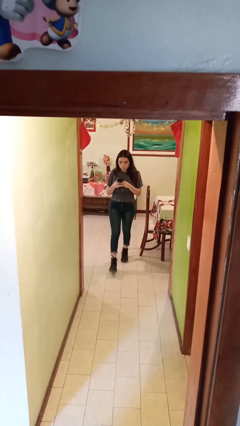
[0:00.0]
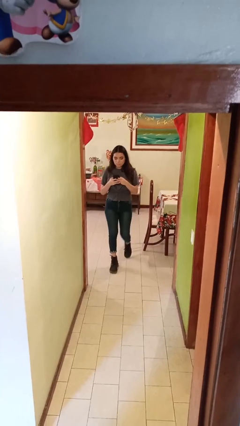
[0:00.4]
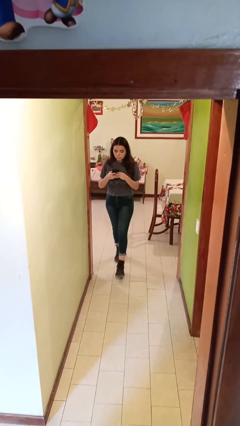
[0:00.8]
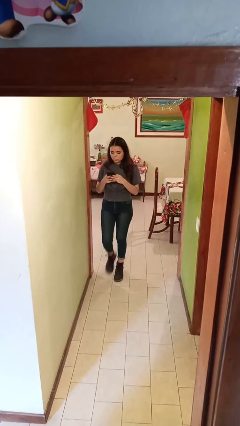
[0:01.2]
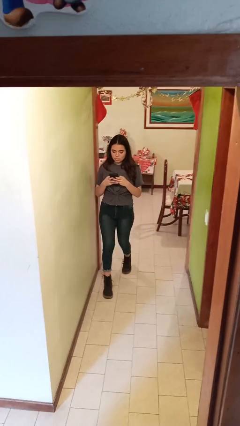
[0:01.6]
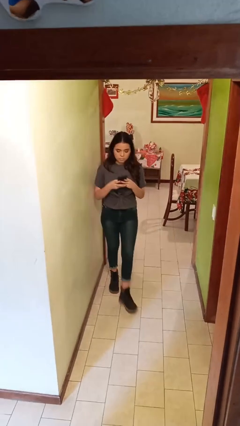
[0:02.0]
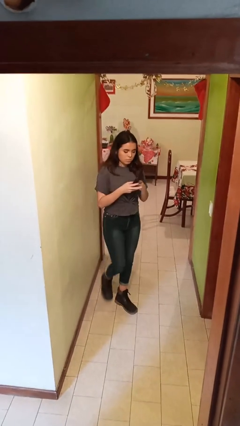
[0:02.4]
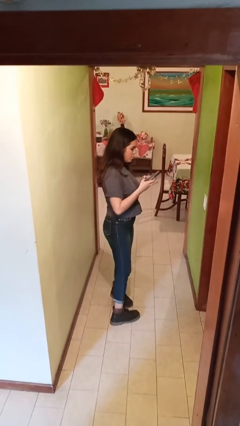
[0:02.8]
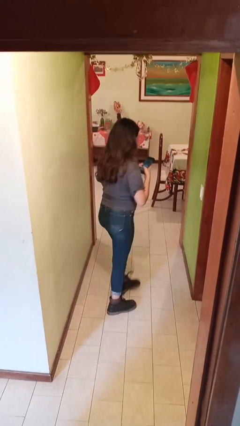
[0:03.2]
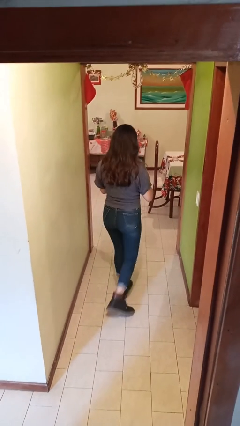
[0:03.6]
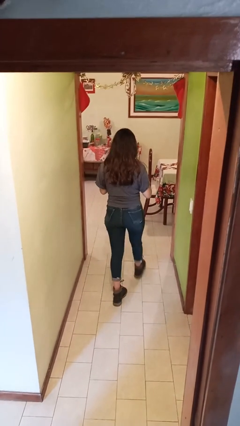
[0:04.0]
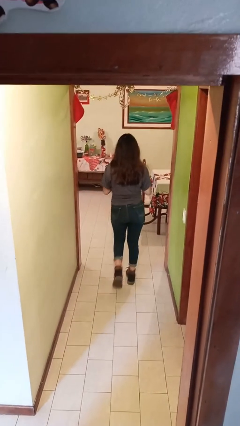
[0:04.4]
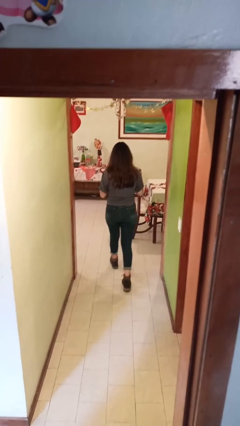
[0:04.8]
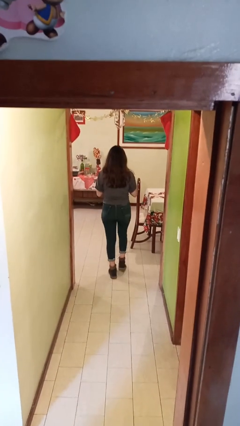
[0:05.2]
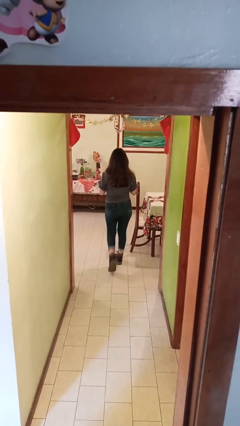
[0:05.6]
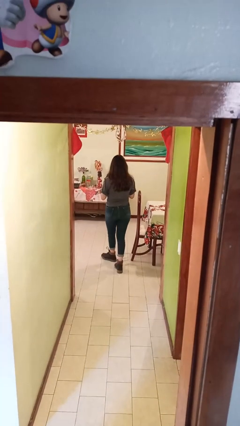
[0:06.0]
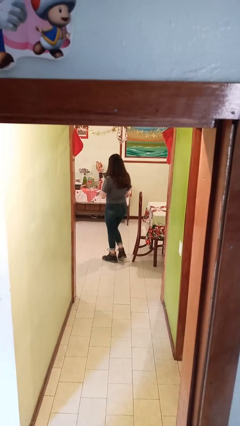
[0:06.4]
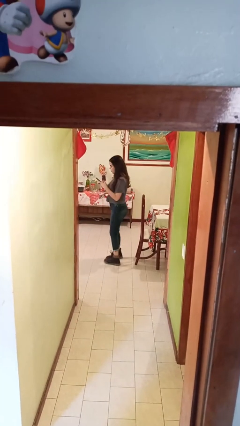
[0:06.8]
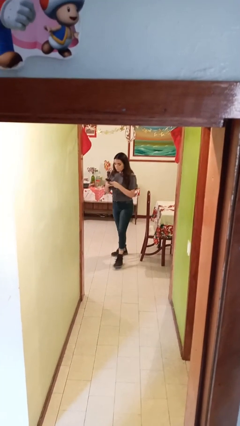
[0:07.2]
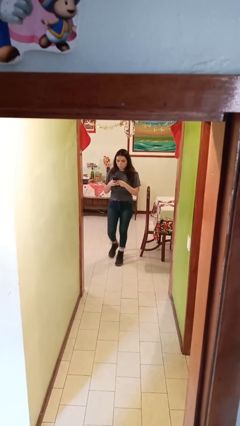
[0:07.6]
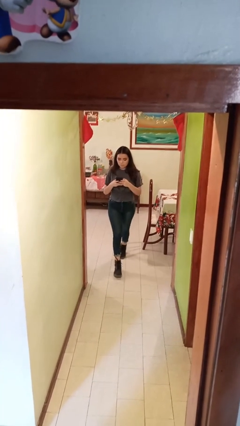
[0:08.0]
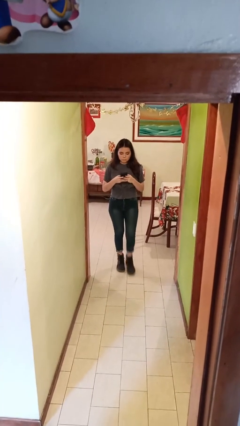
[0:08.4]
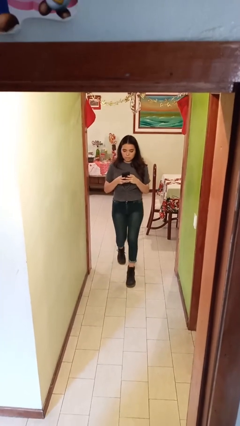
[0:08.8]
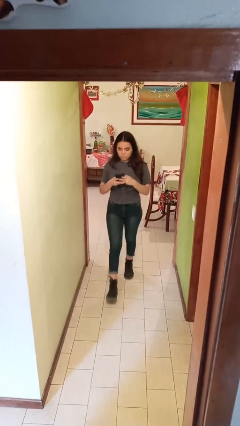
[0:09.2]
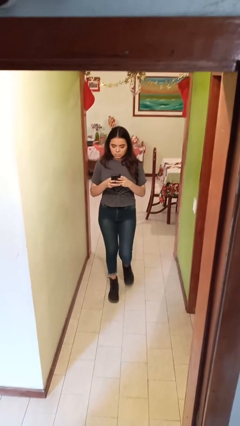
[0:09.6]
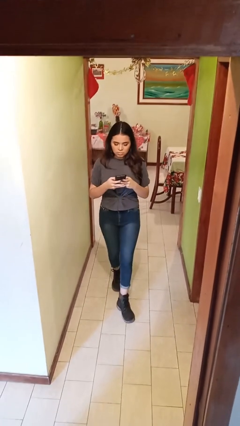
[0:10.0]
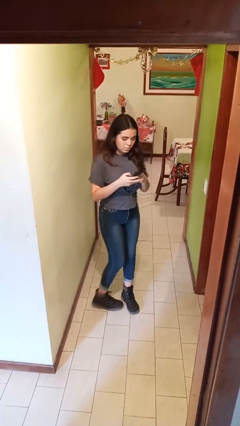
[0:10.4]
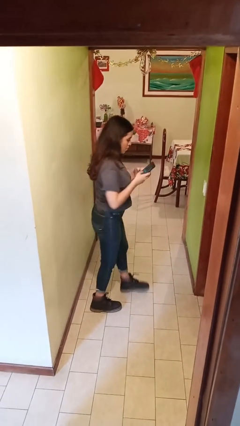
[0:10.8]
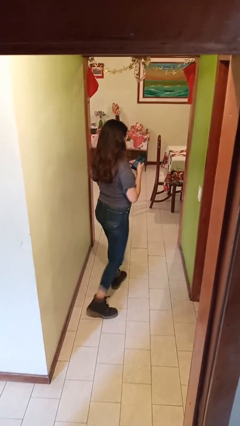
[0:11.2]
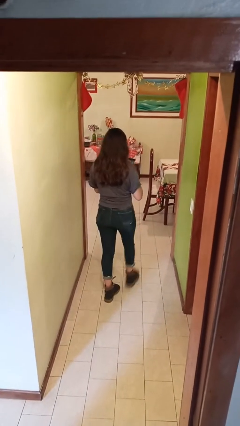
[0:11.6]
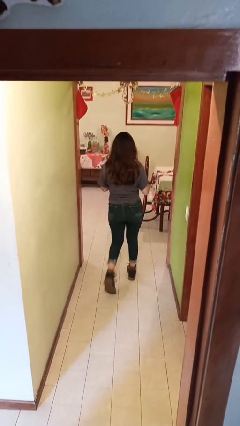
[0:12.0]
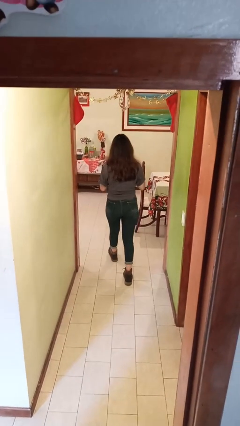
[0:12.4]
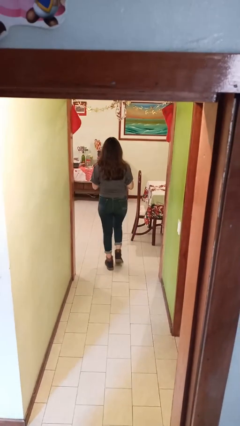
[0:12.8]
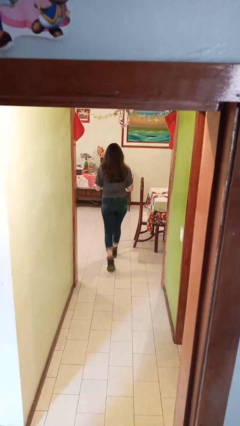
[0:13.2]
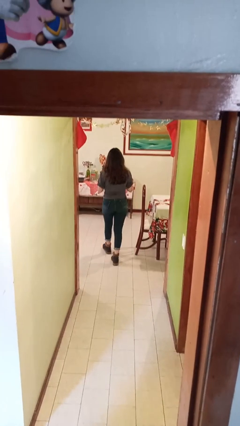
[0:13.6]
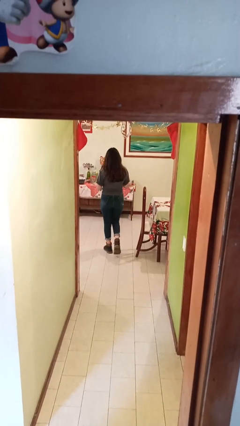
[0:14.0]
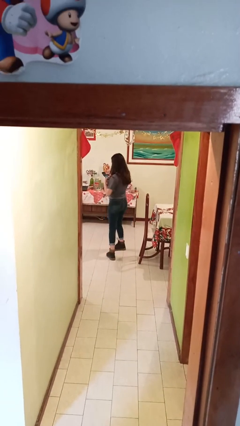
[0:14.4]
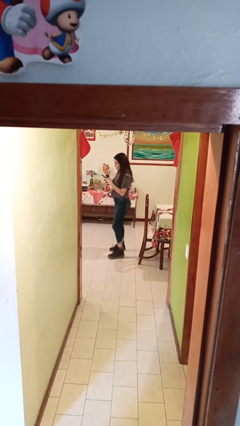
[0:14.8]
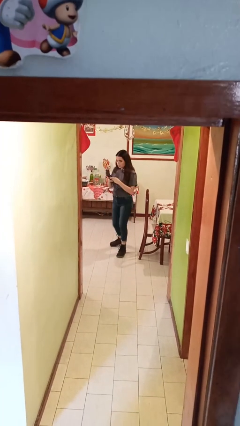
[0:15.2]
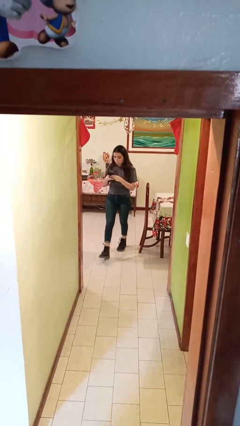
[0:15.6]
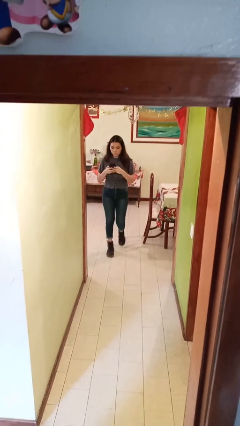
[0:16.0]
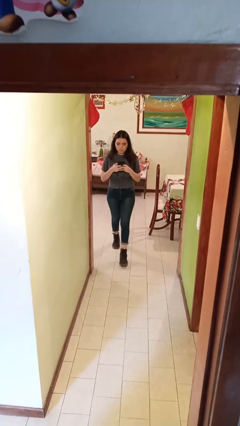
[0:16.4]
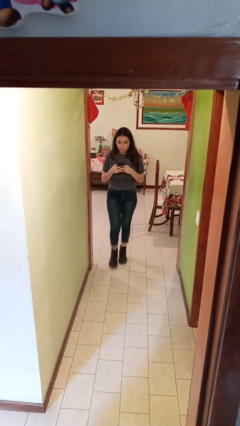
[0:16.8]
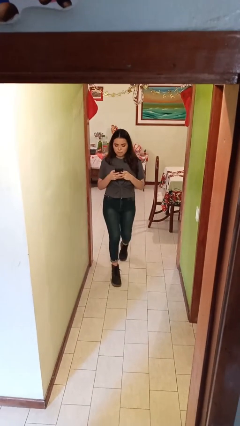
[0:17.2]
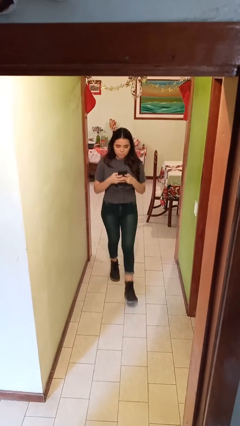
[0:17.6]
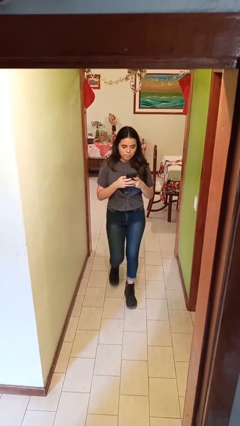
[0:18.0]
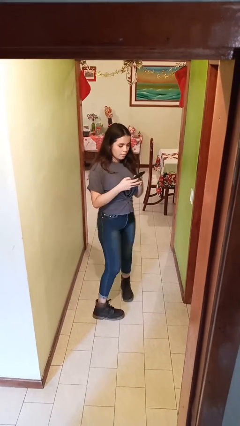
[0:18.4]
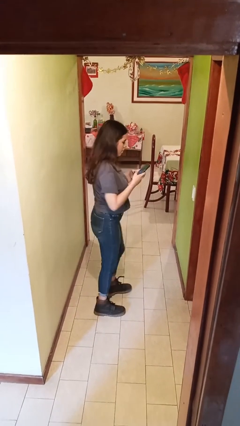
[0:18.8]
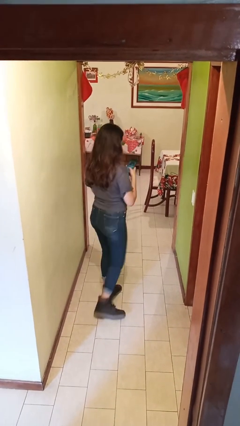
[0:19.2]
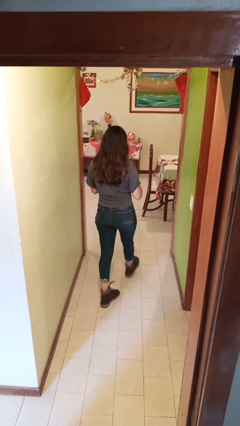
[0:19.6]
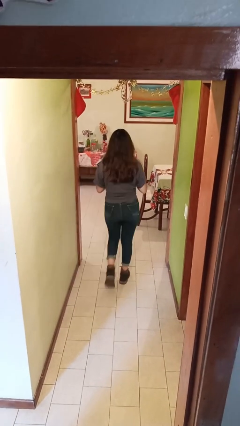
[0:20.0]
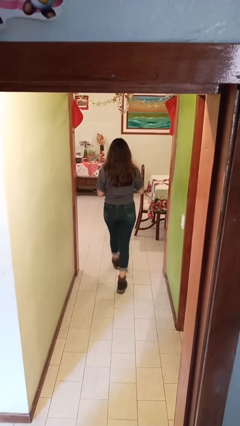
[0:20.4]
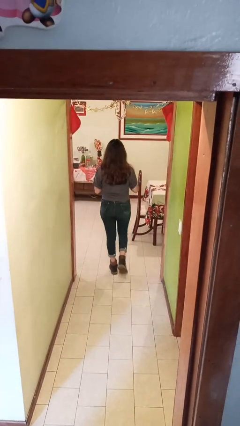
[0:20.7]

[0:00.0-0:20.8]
person texts on phone

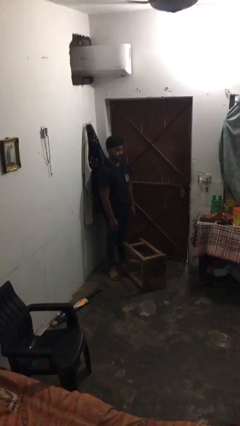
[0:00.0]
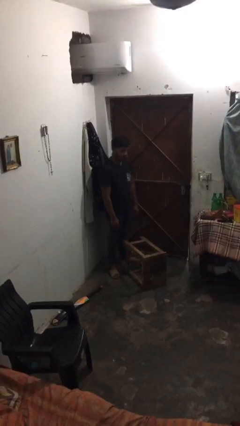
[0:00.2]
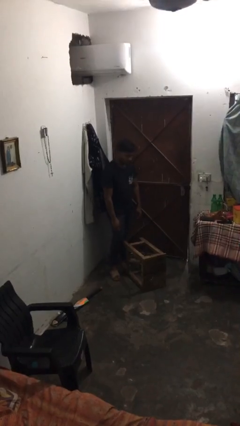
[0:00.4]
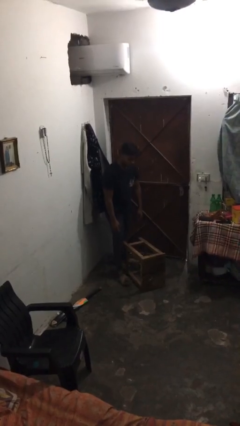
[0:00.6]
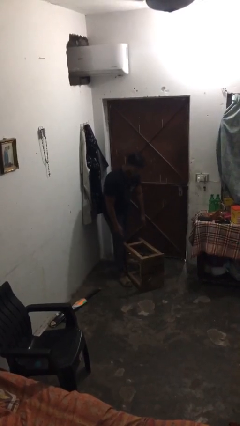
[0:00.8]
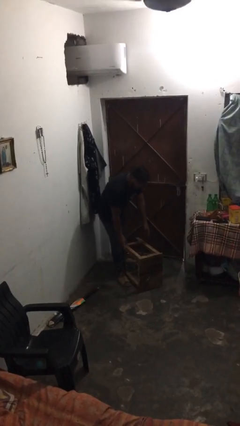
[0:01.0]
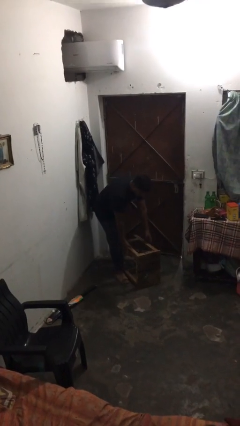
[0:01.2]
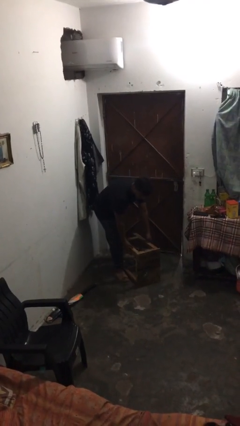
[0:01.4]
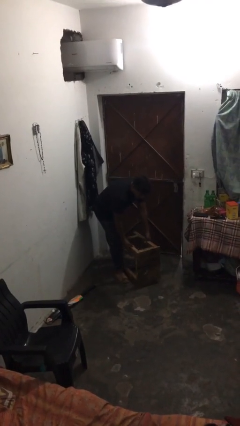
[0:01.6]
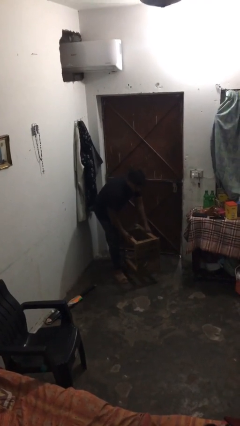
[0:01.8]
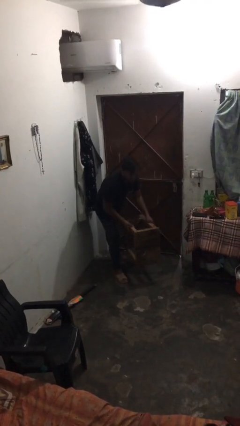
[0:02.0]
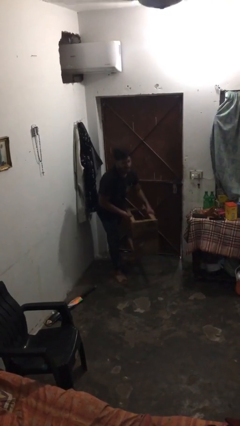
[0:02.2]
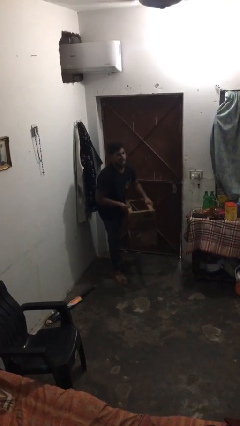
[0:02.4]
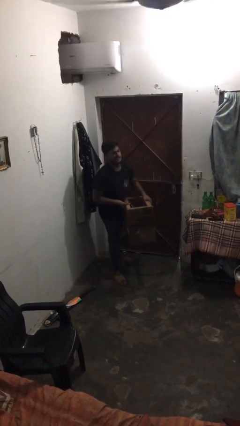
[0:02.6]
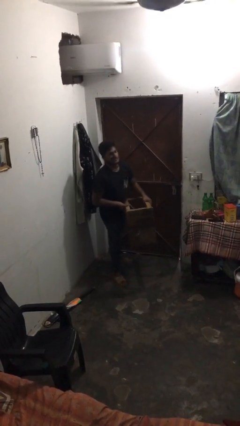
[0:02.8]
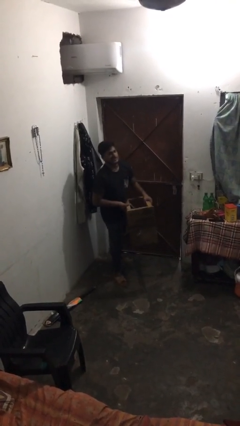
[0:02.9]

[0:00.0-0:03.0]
person picks up object from floor

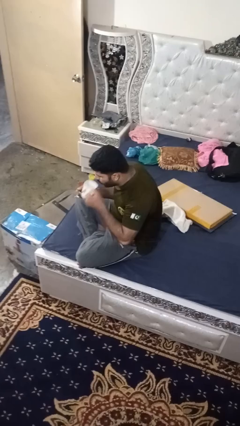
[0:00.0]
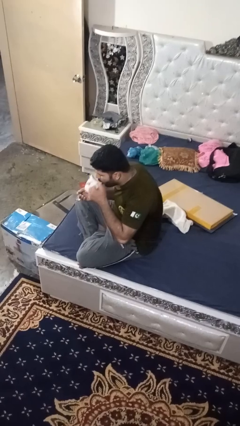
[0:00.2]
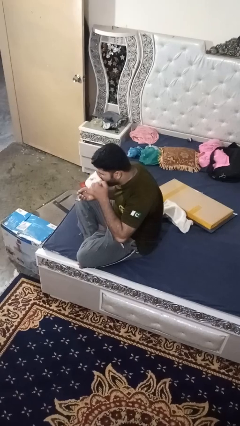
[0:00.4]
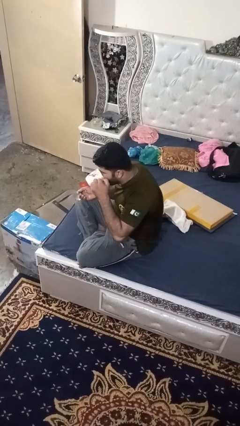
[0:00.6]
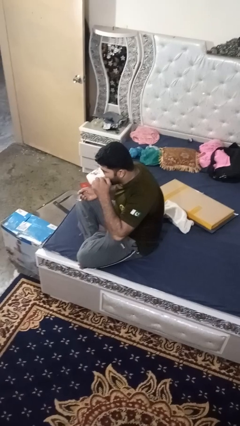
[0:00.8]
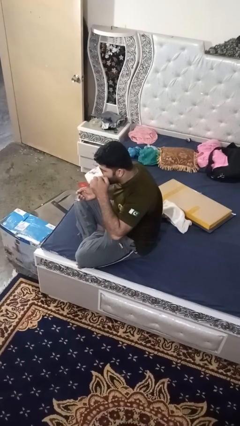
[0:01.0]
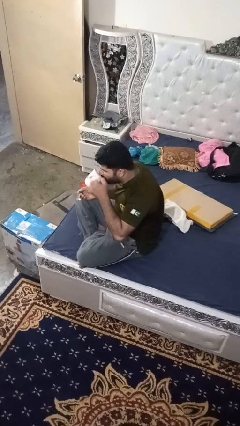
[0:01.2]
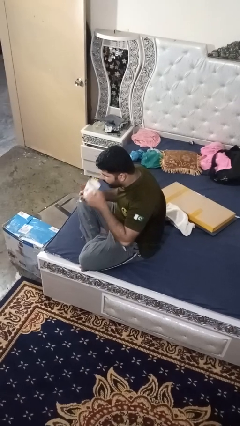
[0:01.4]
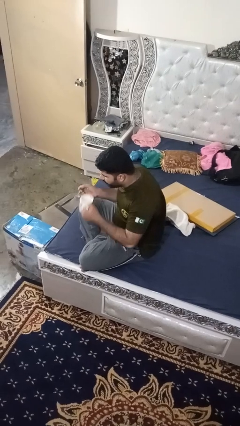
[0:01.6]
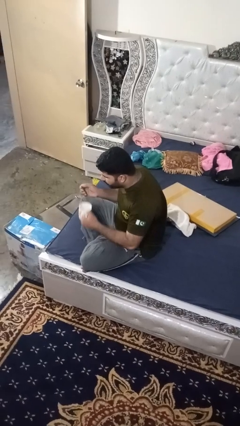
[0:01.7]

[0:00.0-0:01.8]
person drinks from mug

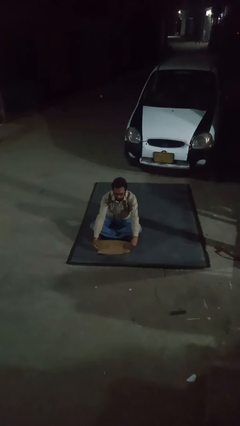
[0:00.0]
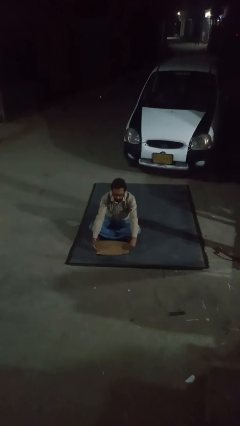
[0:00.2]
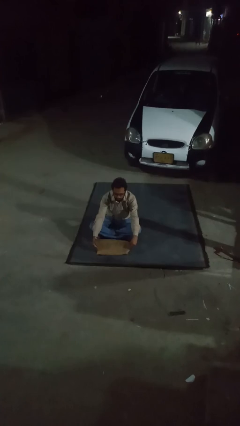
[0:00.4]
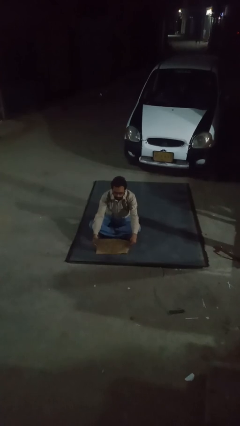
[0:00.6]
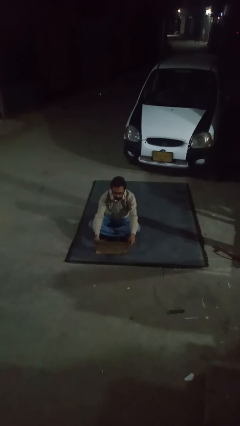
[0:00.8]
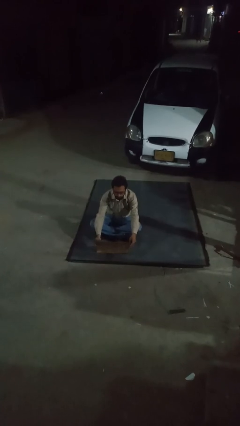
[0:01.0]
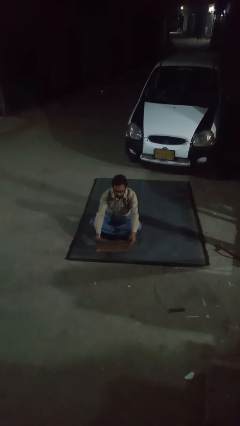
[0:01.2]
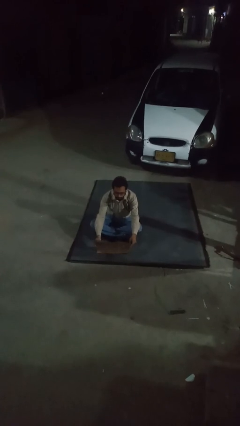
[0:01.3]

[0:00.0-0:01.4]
person opens laptop

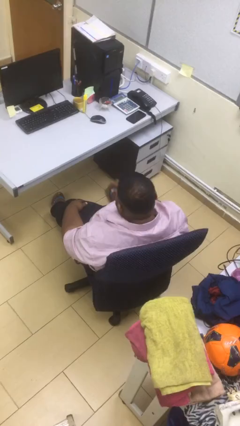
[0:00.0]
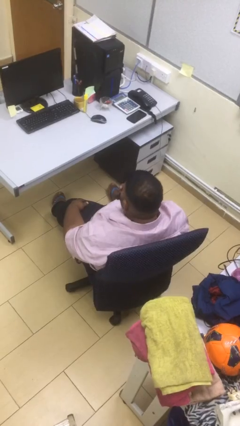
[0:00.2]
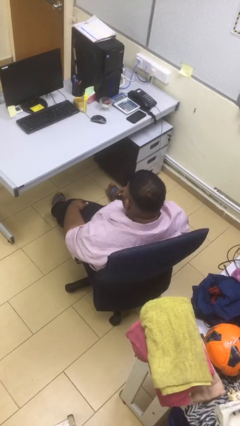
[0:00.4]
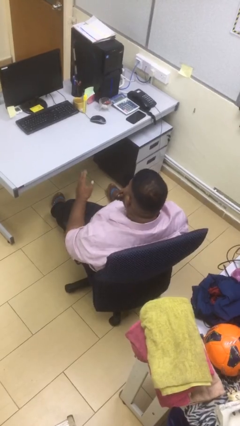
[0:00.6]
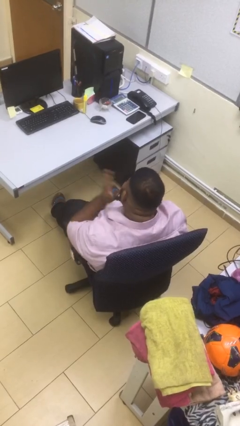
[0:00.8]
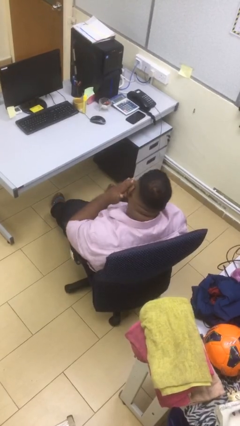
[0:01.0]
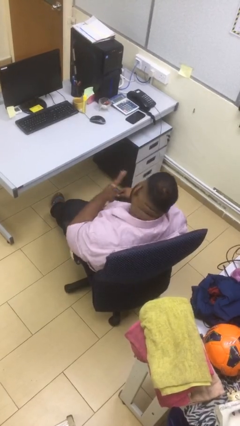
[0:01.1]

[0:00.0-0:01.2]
person swats bug
